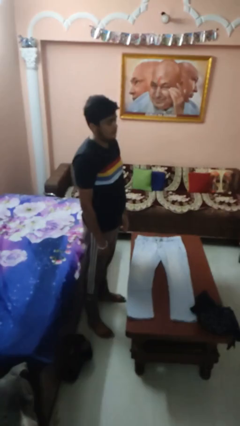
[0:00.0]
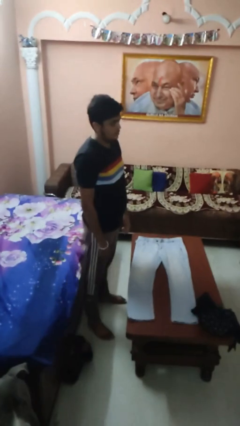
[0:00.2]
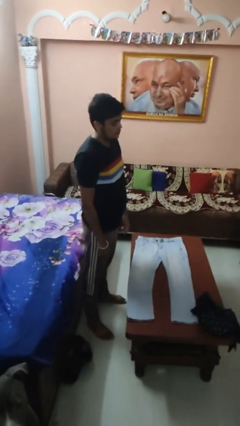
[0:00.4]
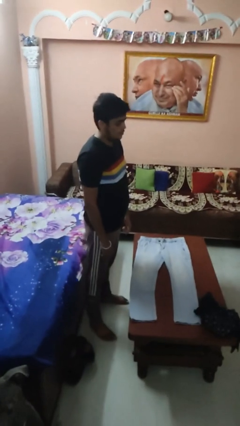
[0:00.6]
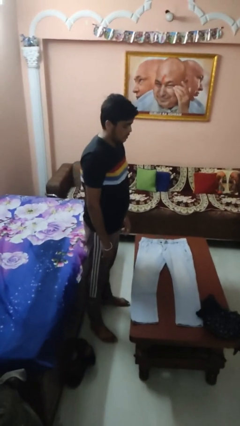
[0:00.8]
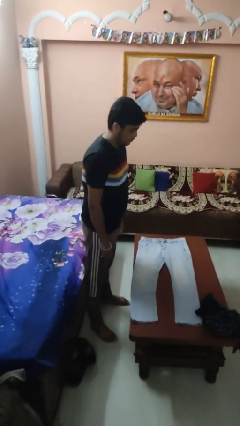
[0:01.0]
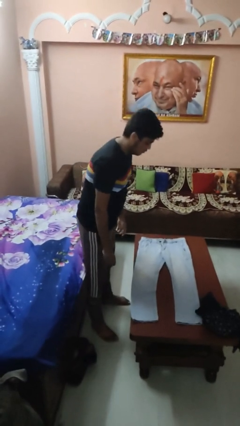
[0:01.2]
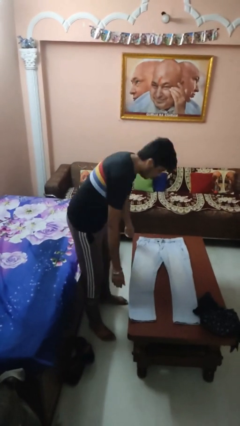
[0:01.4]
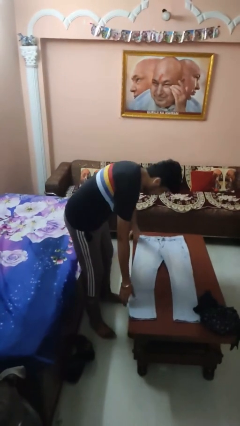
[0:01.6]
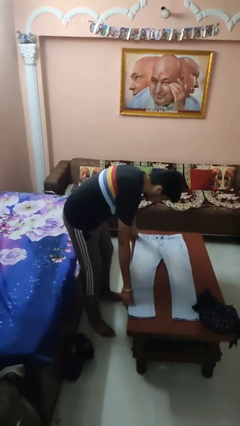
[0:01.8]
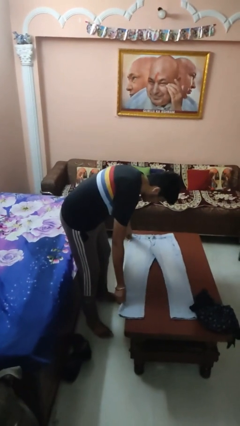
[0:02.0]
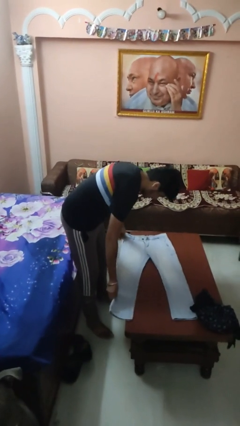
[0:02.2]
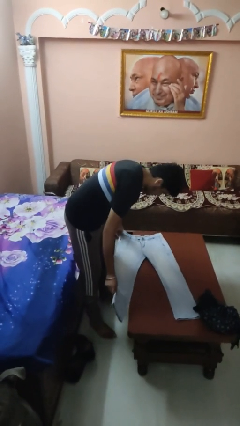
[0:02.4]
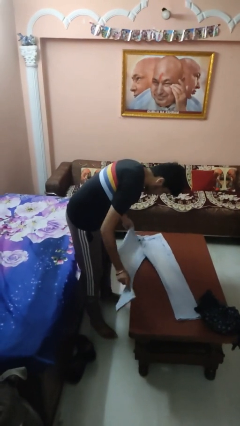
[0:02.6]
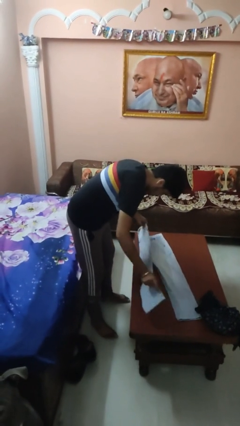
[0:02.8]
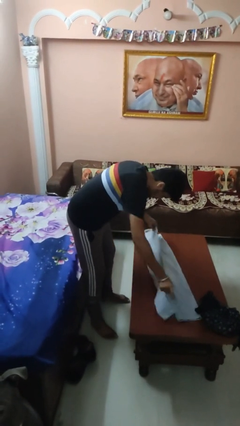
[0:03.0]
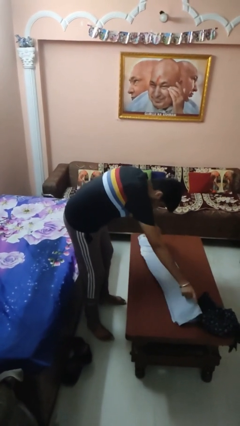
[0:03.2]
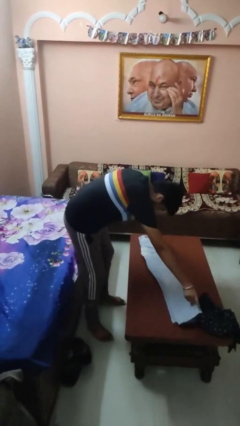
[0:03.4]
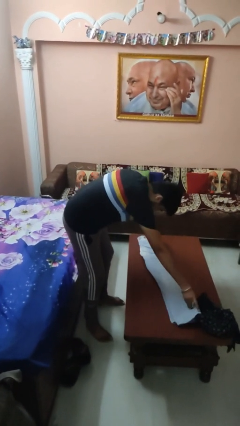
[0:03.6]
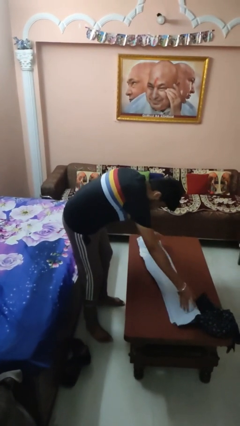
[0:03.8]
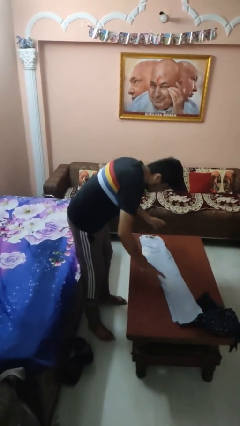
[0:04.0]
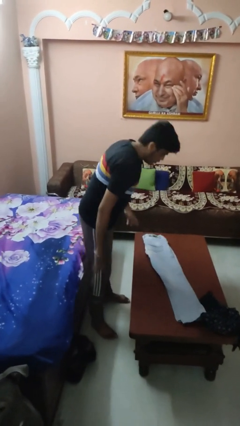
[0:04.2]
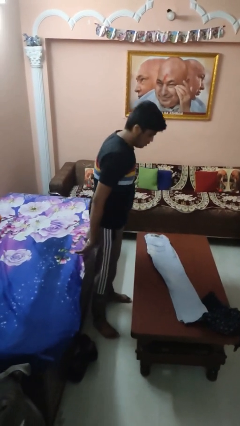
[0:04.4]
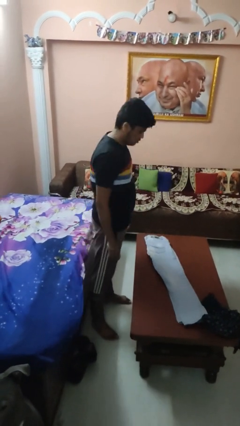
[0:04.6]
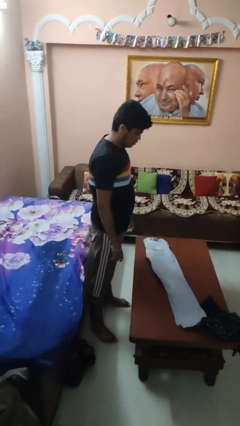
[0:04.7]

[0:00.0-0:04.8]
person folds pants

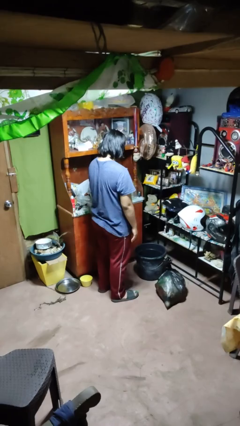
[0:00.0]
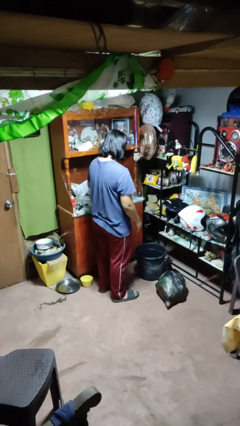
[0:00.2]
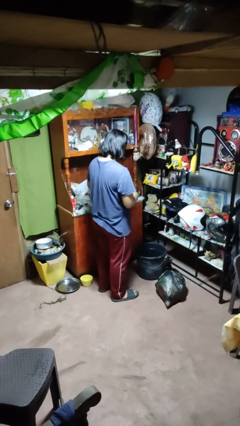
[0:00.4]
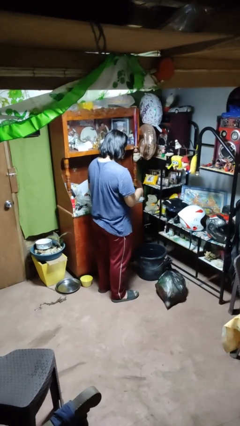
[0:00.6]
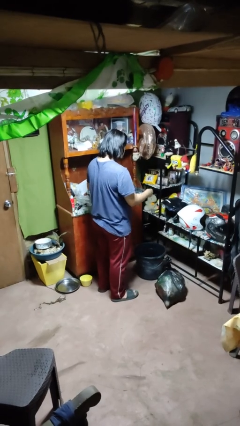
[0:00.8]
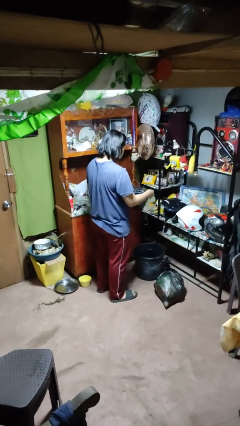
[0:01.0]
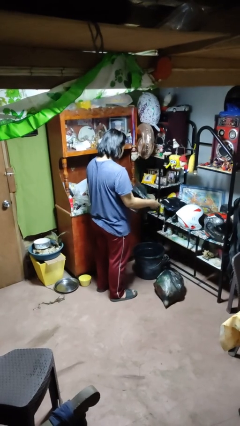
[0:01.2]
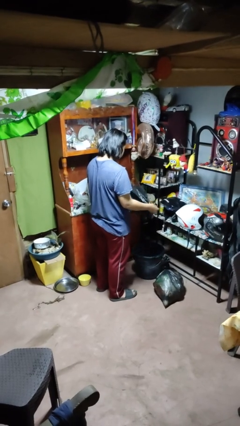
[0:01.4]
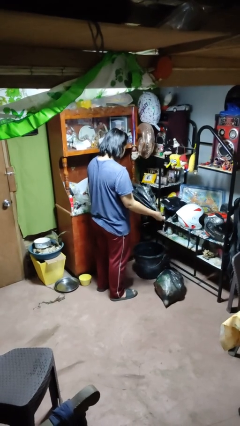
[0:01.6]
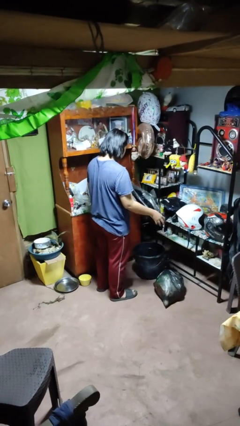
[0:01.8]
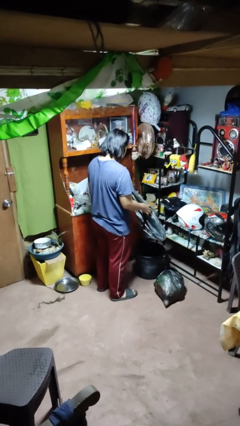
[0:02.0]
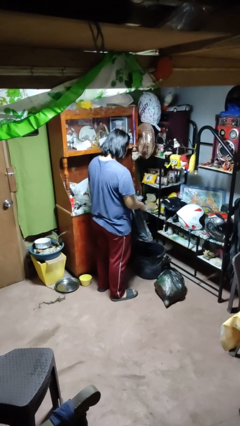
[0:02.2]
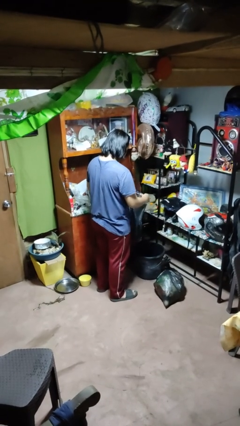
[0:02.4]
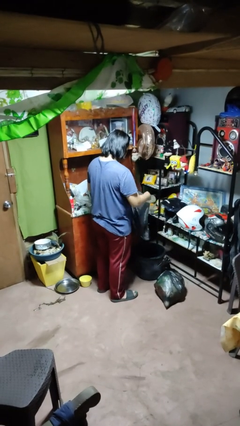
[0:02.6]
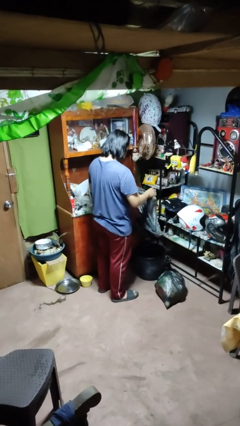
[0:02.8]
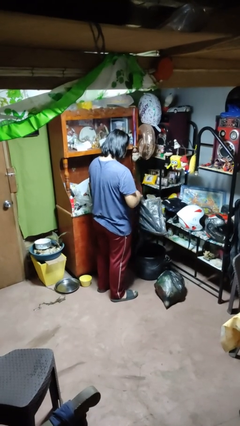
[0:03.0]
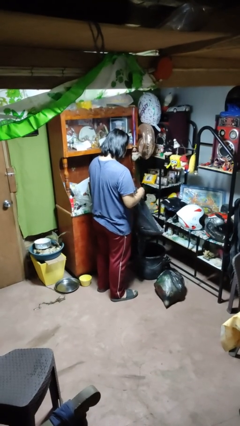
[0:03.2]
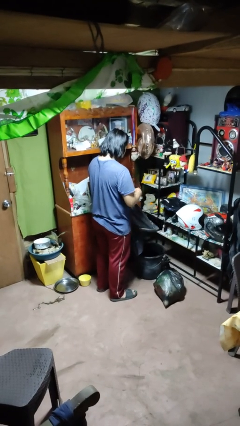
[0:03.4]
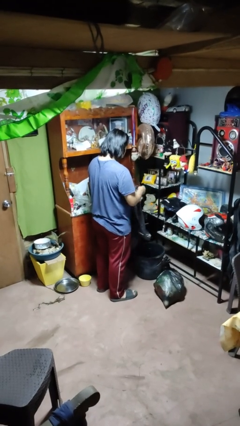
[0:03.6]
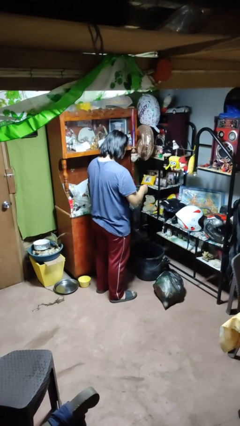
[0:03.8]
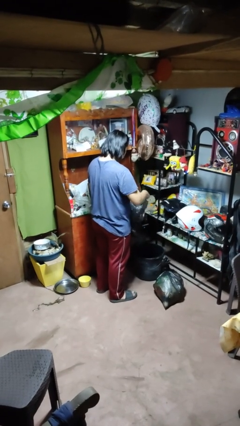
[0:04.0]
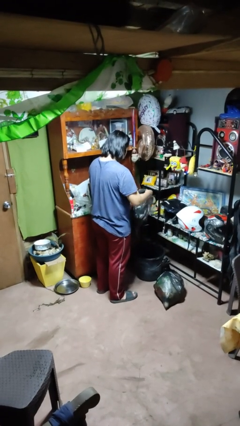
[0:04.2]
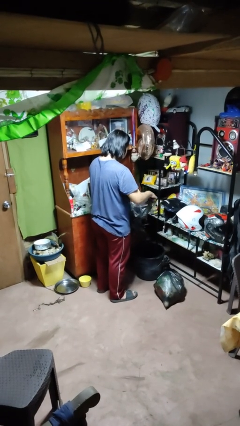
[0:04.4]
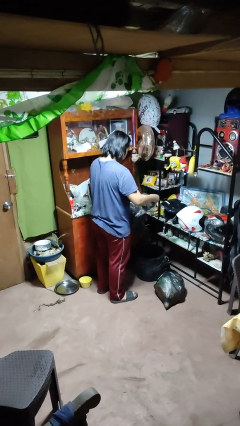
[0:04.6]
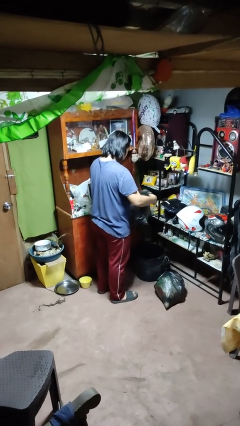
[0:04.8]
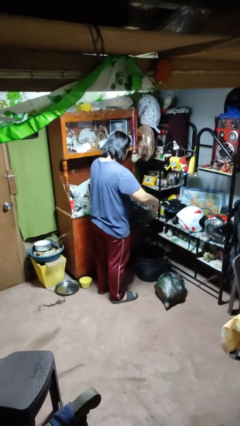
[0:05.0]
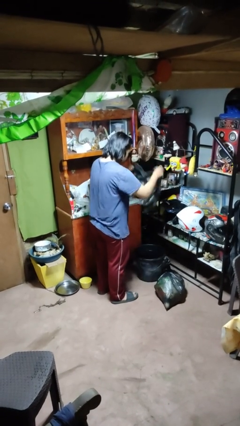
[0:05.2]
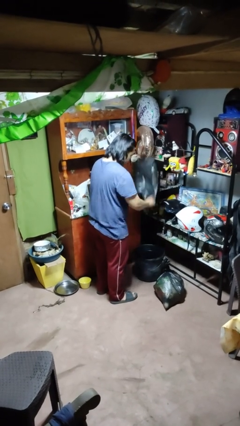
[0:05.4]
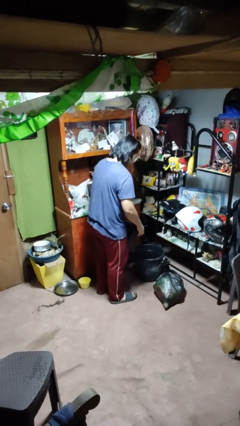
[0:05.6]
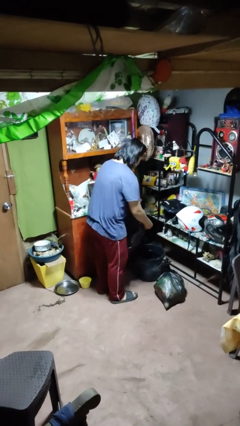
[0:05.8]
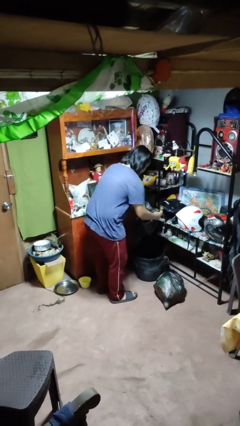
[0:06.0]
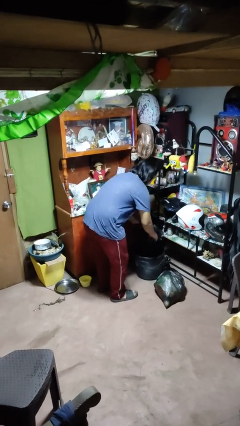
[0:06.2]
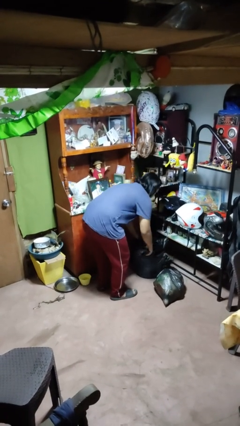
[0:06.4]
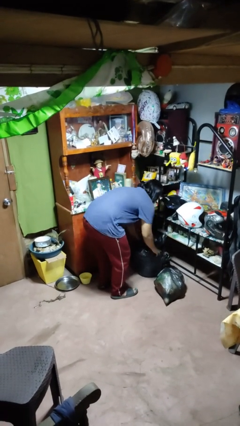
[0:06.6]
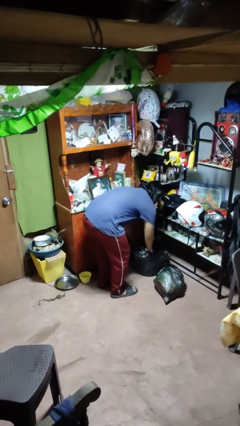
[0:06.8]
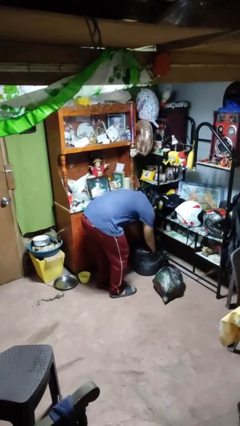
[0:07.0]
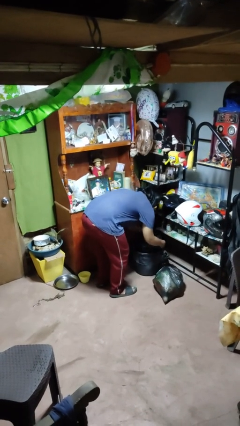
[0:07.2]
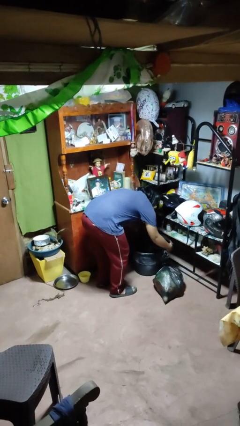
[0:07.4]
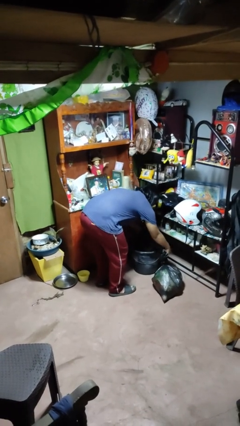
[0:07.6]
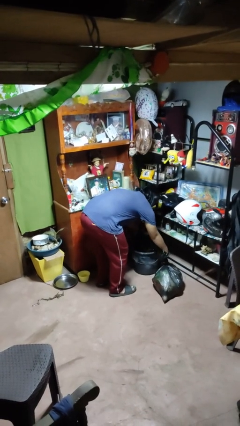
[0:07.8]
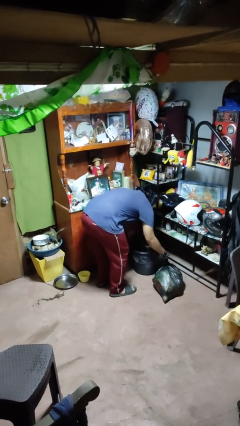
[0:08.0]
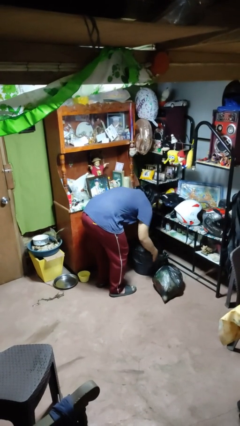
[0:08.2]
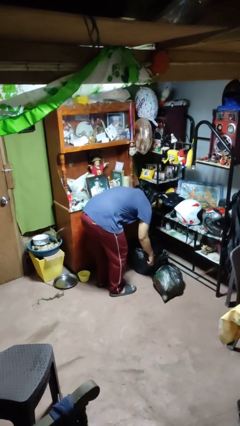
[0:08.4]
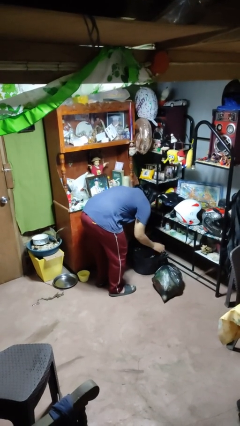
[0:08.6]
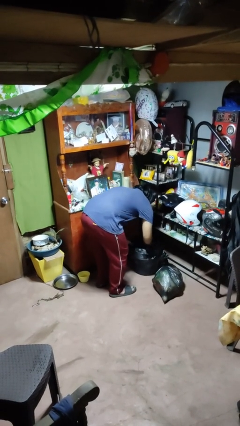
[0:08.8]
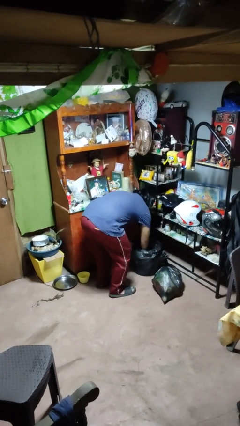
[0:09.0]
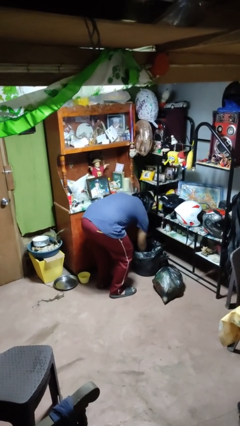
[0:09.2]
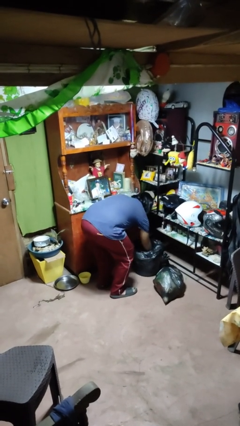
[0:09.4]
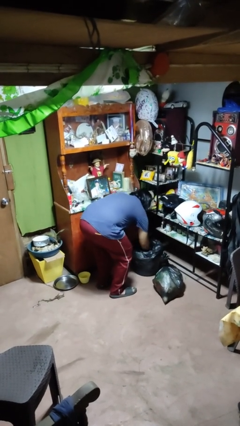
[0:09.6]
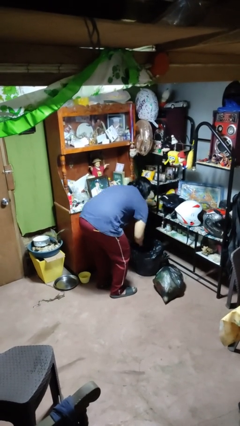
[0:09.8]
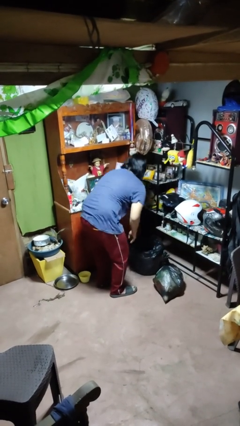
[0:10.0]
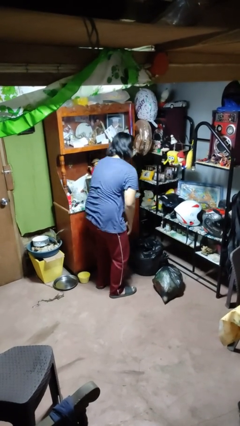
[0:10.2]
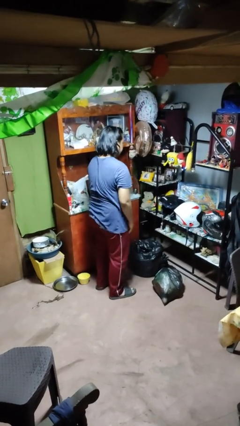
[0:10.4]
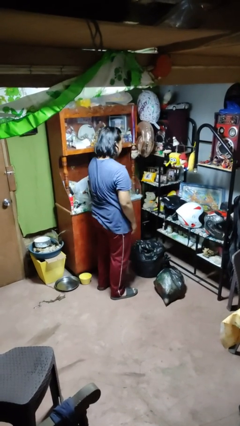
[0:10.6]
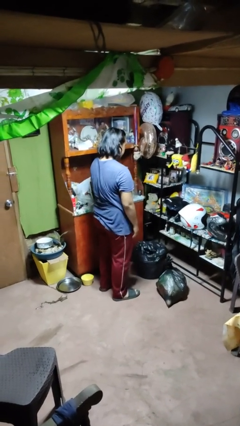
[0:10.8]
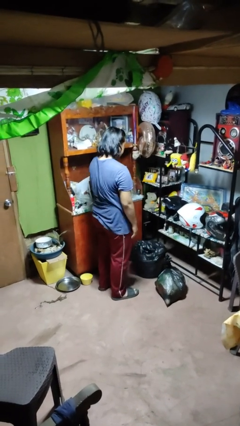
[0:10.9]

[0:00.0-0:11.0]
person inserts trashbag into trashcan

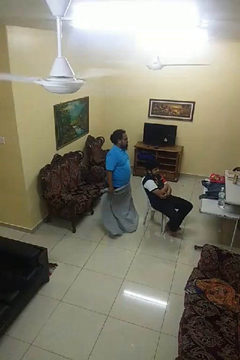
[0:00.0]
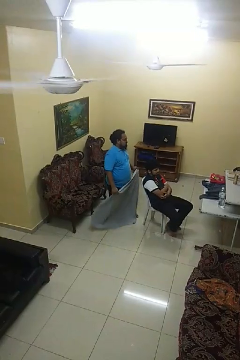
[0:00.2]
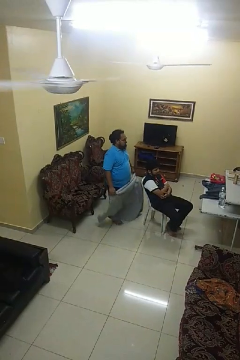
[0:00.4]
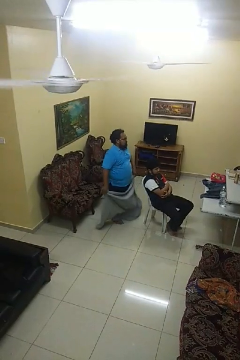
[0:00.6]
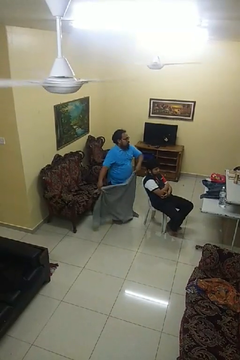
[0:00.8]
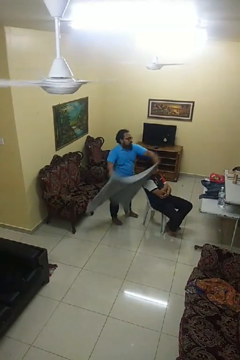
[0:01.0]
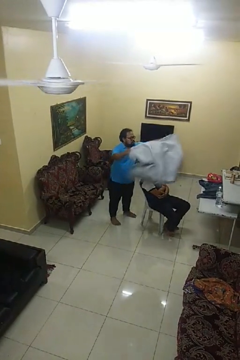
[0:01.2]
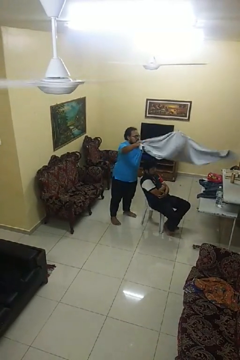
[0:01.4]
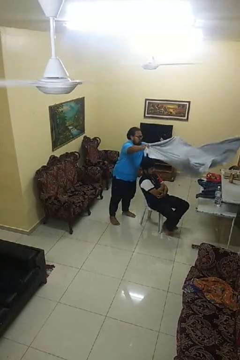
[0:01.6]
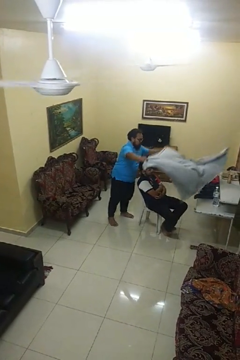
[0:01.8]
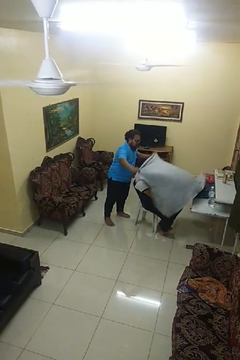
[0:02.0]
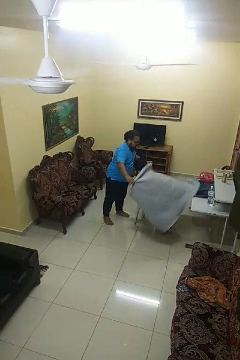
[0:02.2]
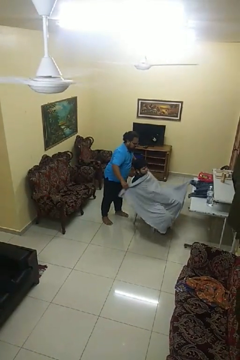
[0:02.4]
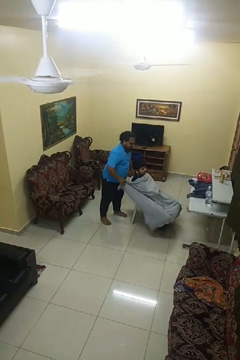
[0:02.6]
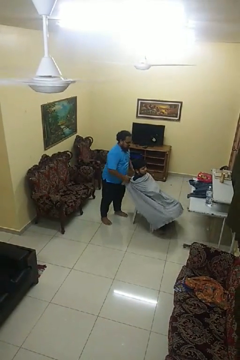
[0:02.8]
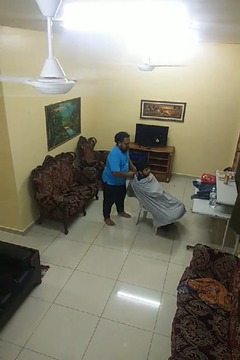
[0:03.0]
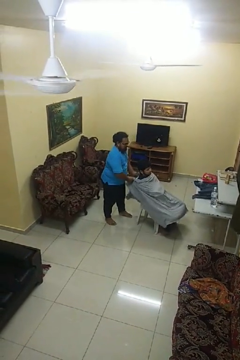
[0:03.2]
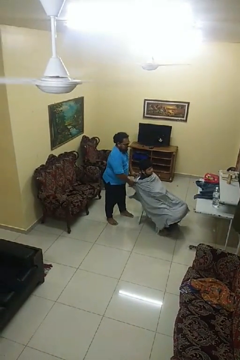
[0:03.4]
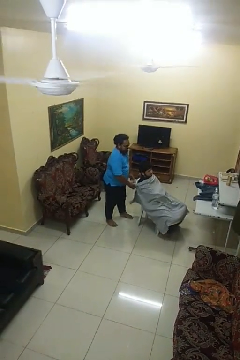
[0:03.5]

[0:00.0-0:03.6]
person covers friend with blanket
